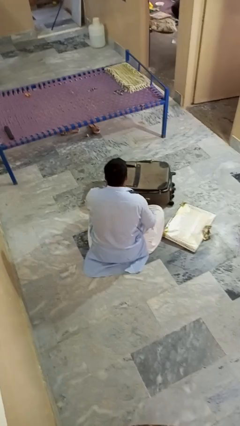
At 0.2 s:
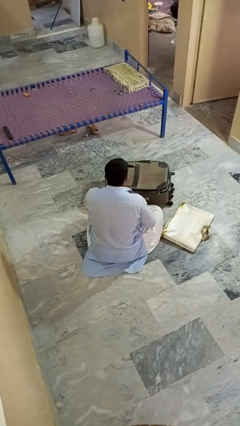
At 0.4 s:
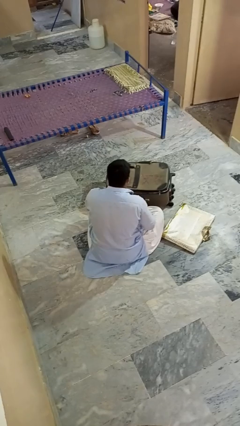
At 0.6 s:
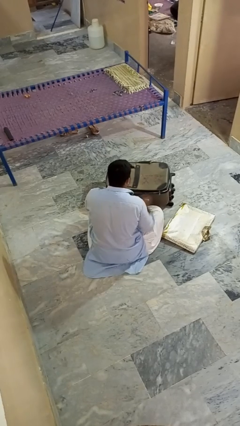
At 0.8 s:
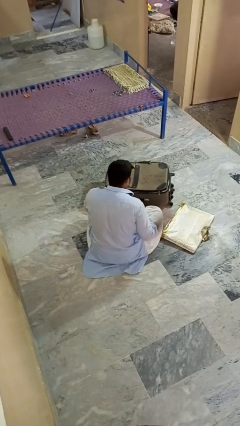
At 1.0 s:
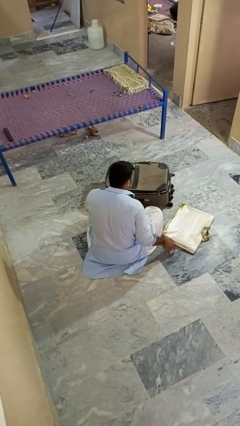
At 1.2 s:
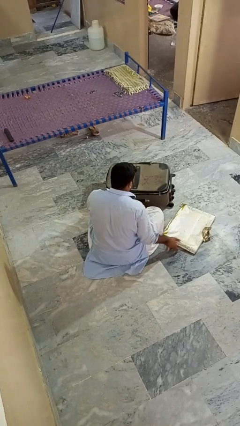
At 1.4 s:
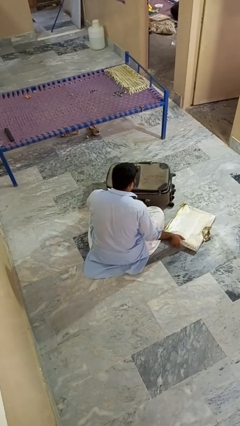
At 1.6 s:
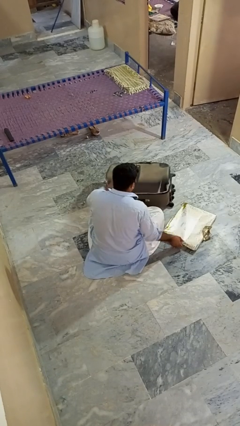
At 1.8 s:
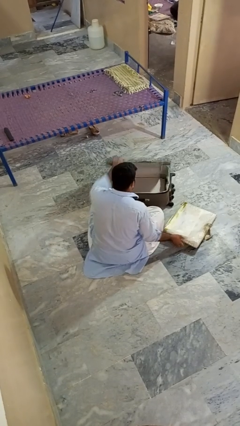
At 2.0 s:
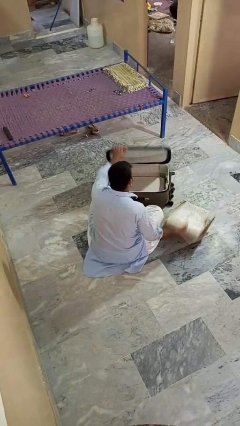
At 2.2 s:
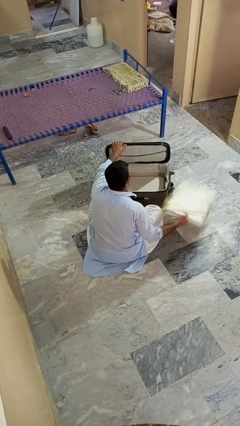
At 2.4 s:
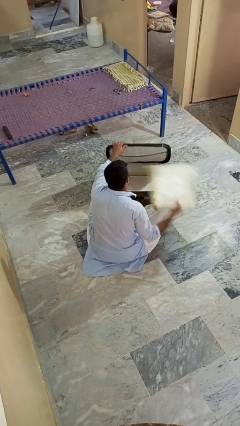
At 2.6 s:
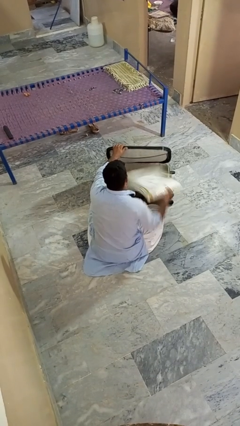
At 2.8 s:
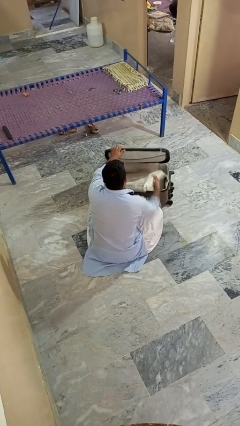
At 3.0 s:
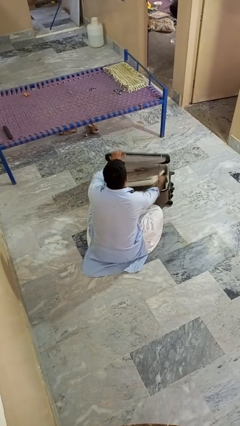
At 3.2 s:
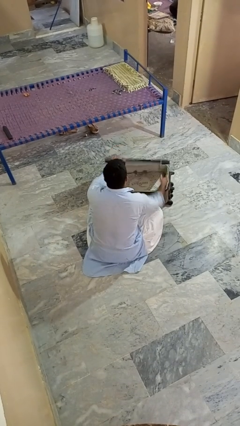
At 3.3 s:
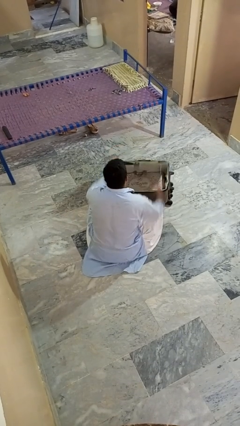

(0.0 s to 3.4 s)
person puts object into bag

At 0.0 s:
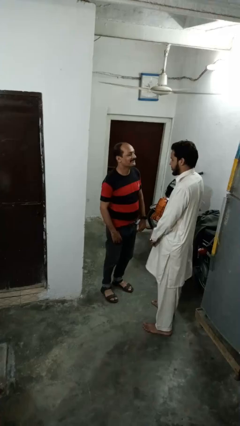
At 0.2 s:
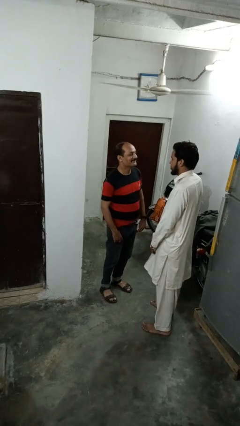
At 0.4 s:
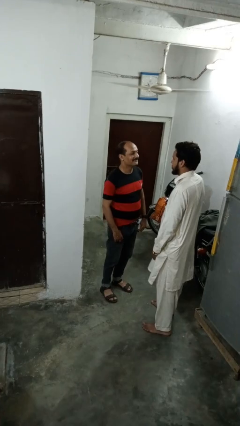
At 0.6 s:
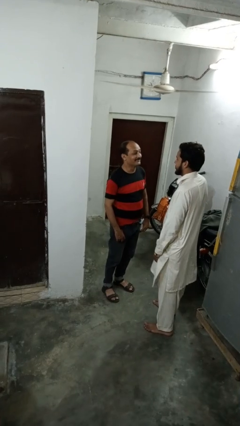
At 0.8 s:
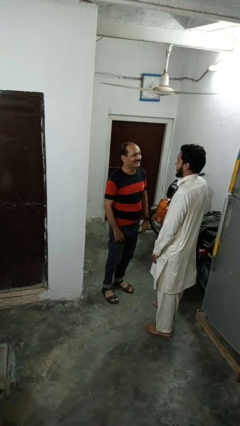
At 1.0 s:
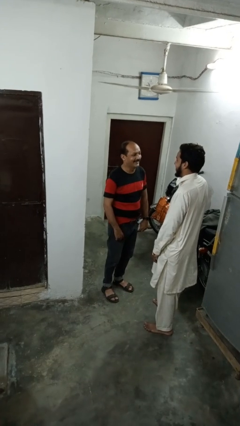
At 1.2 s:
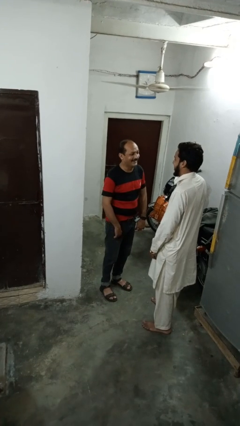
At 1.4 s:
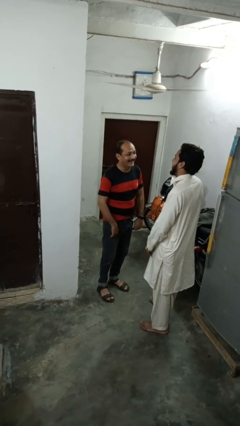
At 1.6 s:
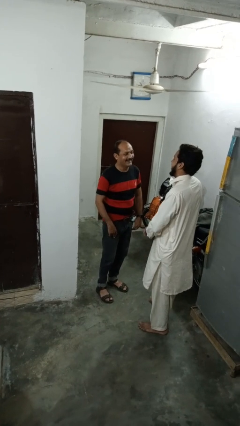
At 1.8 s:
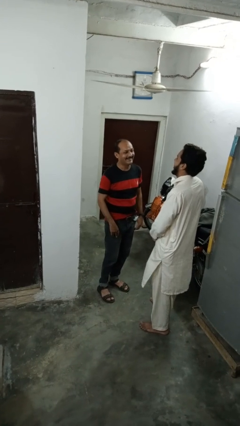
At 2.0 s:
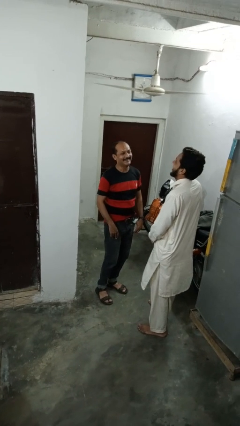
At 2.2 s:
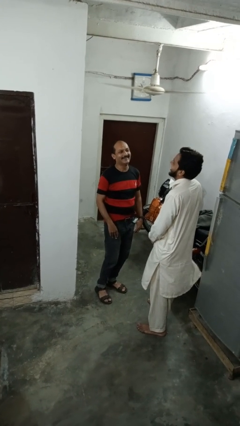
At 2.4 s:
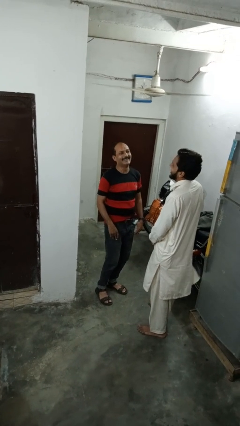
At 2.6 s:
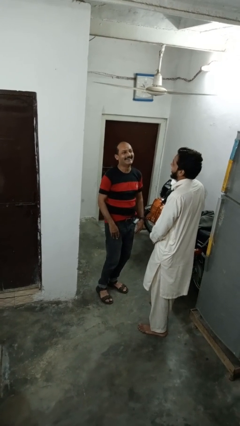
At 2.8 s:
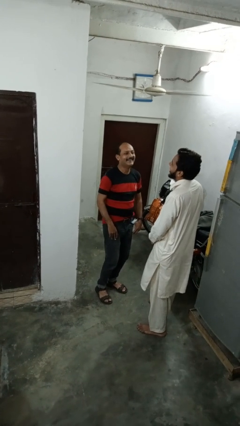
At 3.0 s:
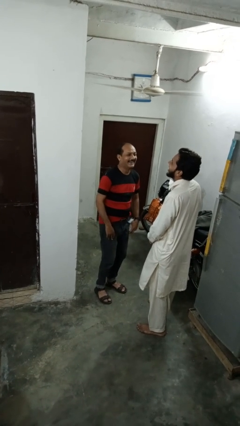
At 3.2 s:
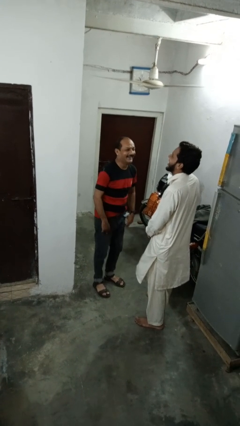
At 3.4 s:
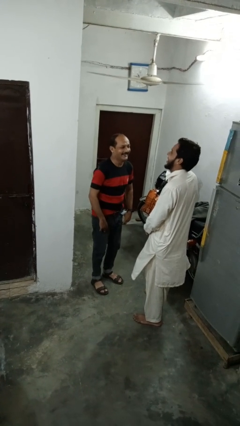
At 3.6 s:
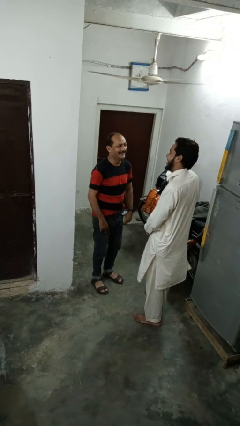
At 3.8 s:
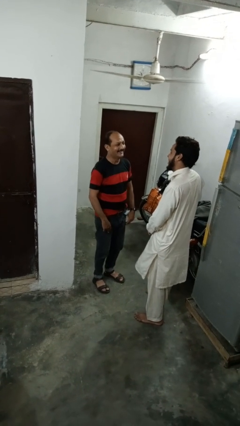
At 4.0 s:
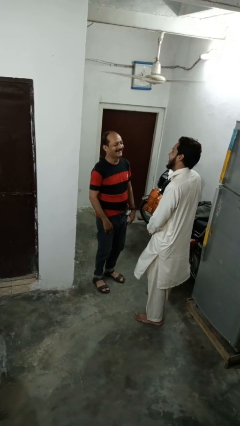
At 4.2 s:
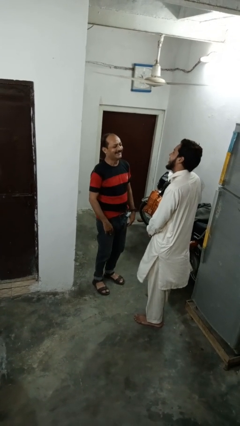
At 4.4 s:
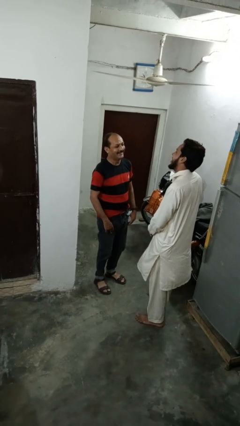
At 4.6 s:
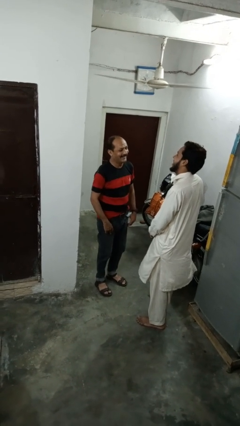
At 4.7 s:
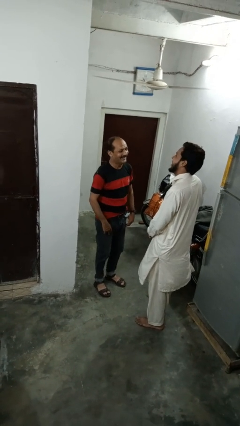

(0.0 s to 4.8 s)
person laughs with person

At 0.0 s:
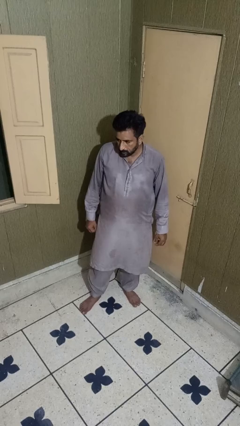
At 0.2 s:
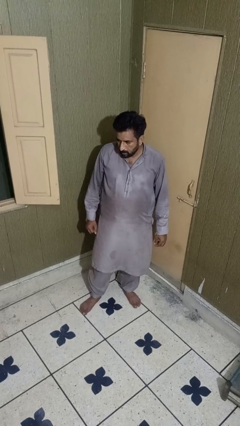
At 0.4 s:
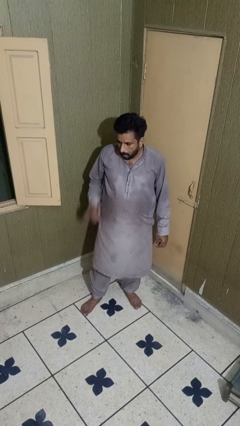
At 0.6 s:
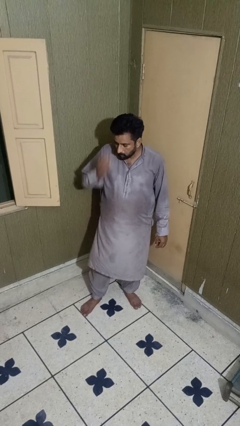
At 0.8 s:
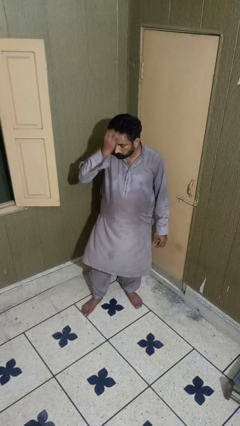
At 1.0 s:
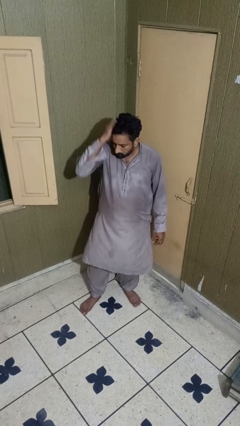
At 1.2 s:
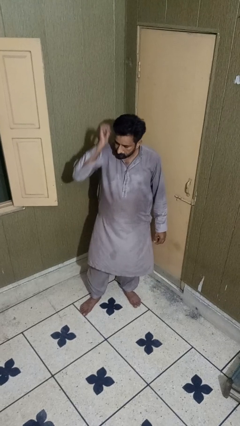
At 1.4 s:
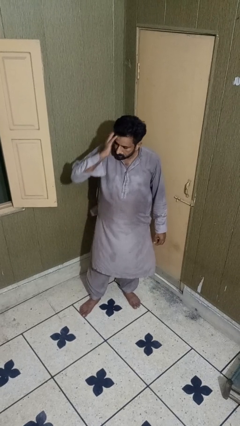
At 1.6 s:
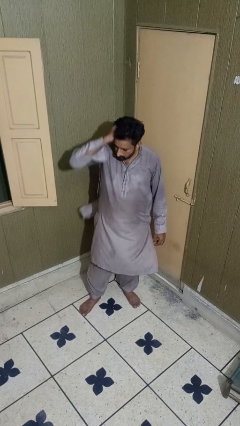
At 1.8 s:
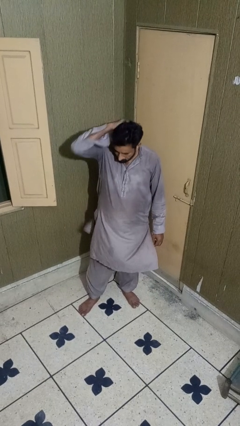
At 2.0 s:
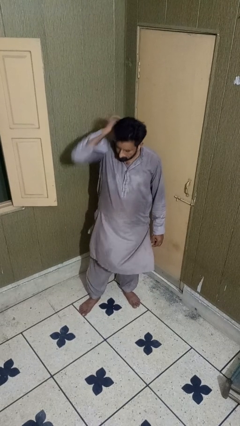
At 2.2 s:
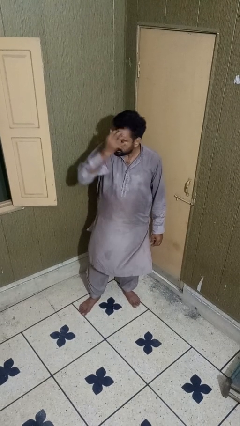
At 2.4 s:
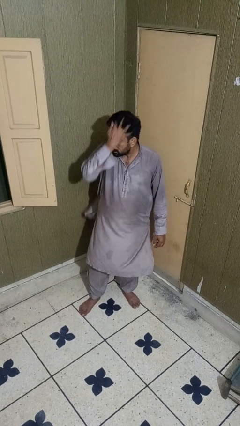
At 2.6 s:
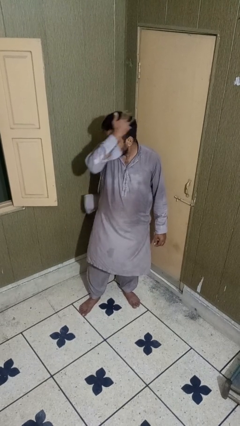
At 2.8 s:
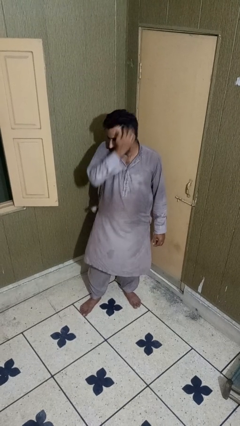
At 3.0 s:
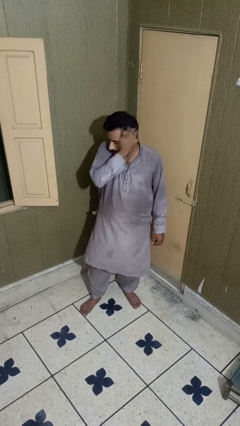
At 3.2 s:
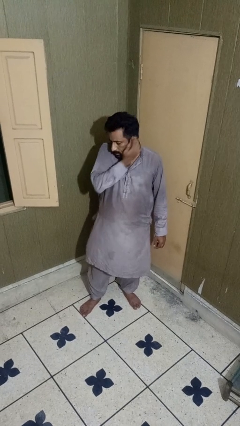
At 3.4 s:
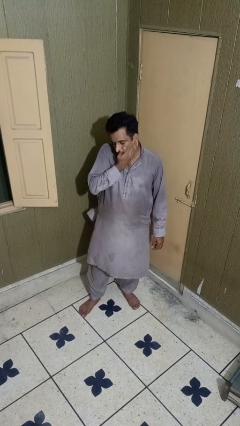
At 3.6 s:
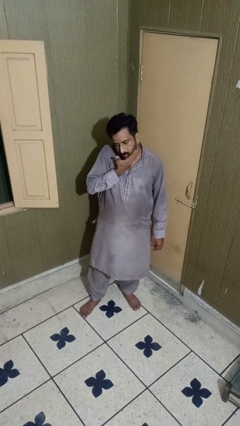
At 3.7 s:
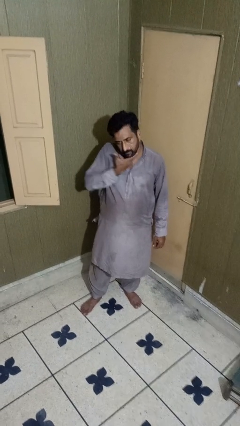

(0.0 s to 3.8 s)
person scratches face

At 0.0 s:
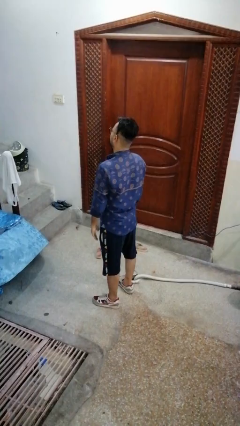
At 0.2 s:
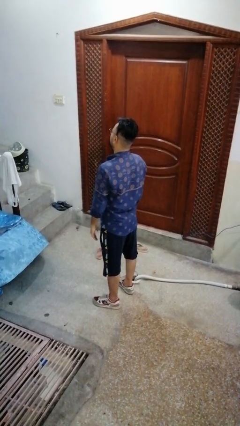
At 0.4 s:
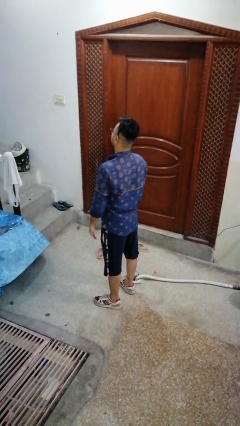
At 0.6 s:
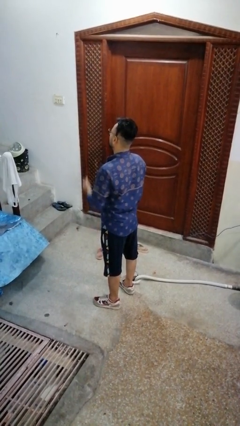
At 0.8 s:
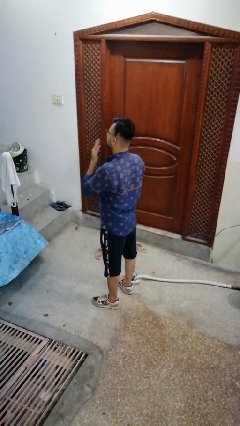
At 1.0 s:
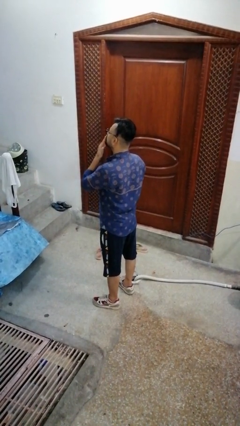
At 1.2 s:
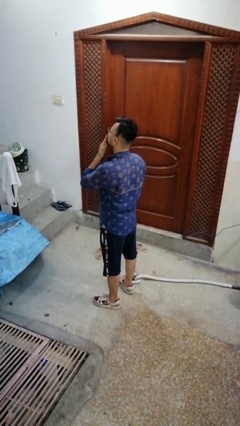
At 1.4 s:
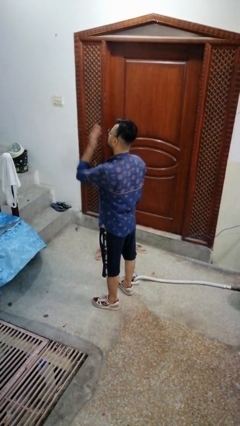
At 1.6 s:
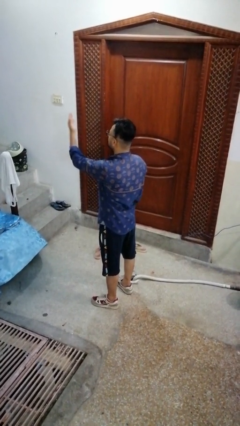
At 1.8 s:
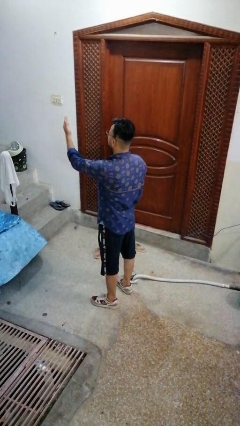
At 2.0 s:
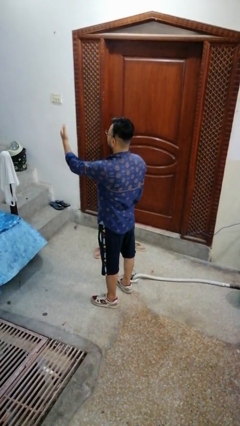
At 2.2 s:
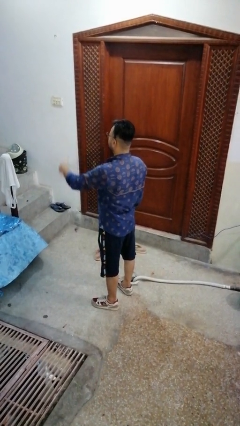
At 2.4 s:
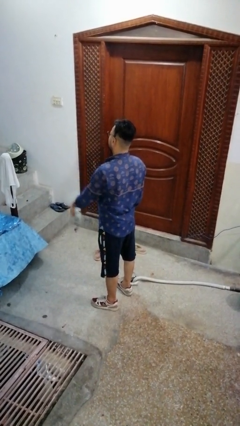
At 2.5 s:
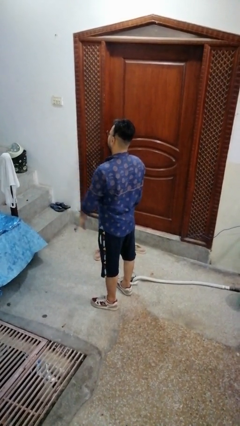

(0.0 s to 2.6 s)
person gestures blow kiss

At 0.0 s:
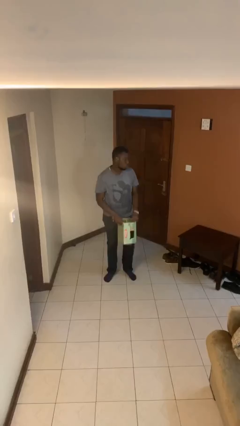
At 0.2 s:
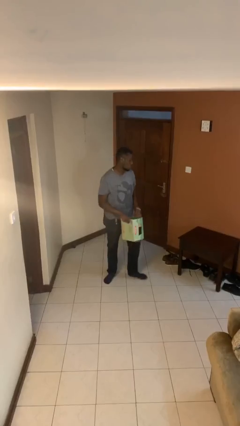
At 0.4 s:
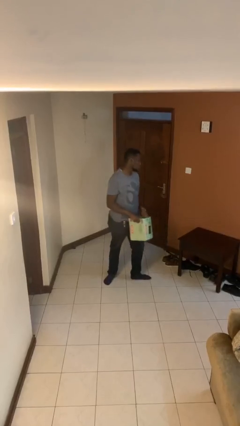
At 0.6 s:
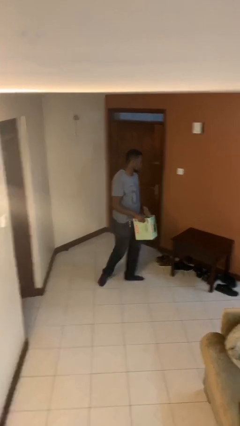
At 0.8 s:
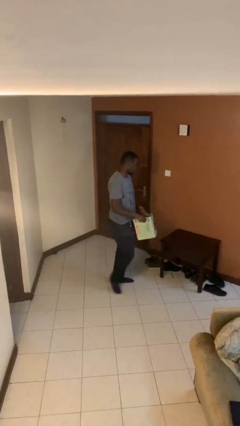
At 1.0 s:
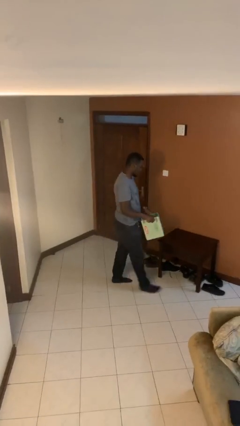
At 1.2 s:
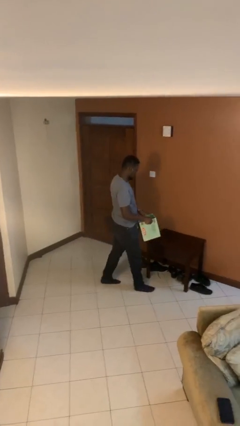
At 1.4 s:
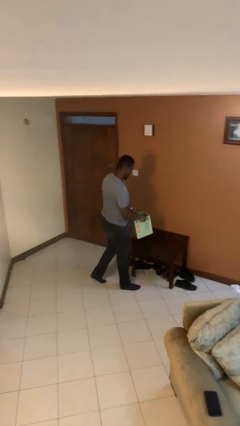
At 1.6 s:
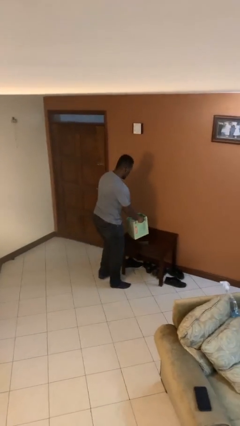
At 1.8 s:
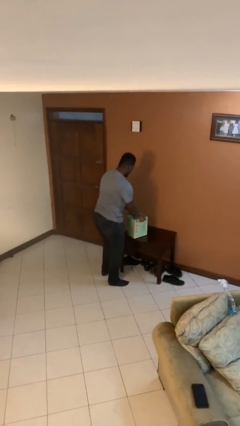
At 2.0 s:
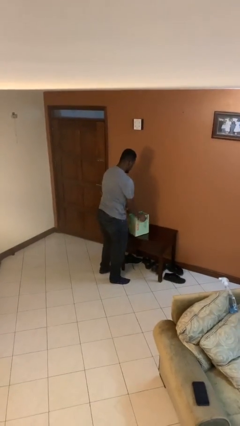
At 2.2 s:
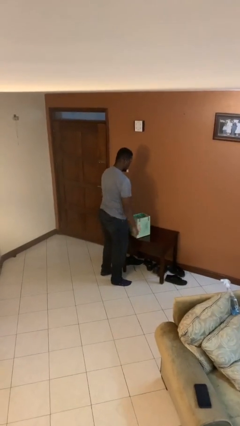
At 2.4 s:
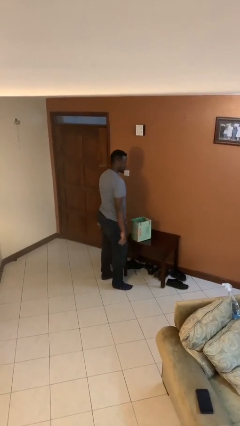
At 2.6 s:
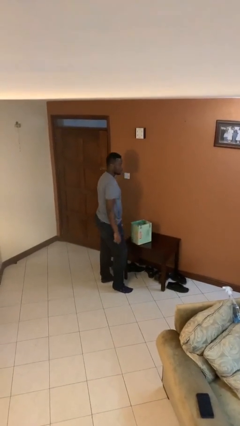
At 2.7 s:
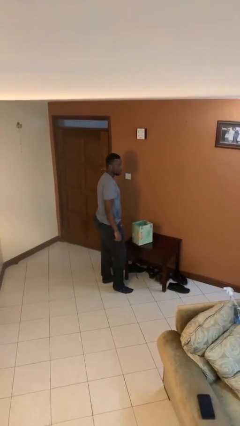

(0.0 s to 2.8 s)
person puts down object on table
